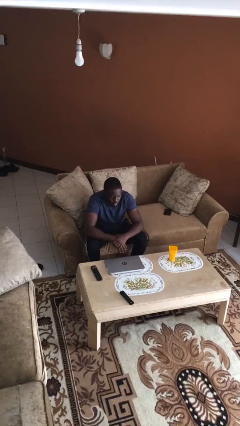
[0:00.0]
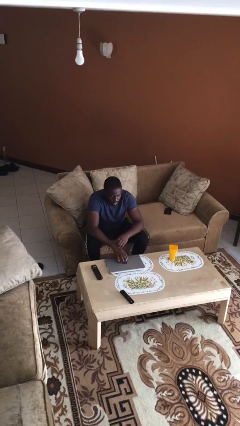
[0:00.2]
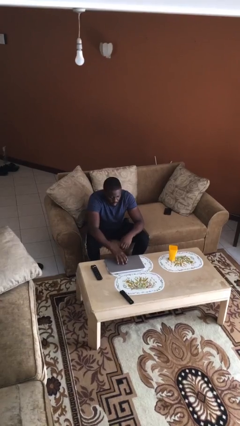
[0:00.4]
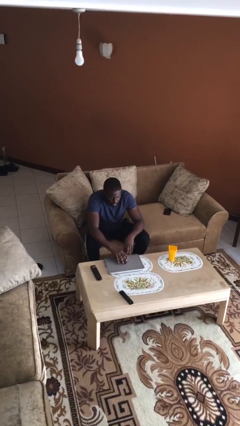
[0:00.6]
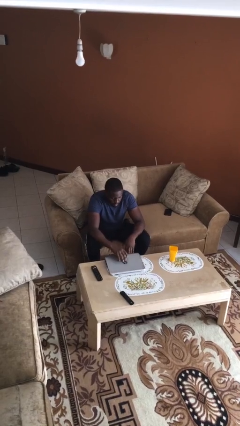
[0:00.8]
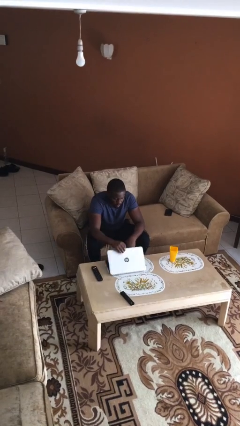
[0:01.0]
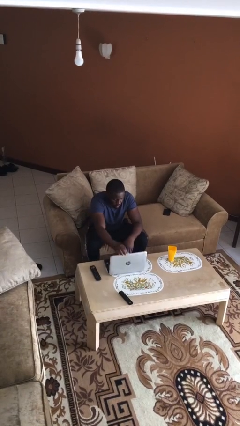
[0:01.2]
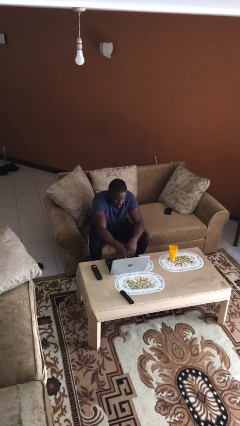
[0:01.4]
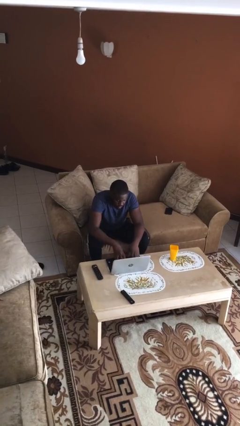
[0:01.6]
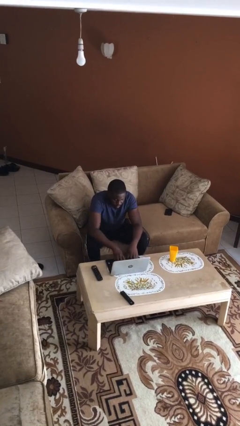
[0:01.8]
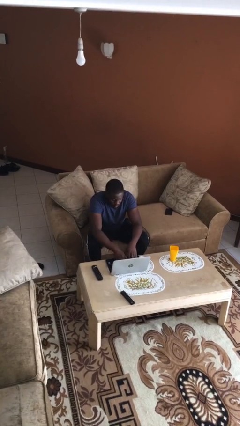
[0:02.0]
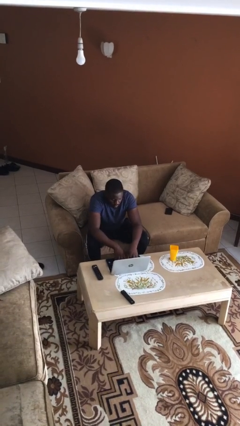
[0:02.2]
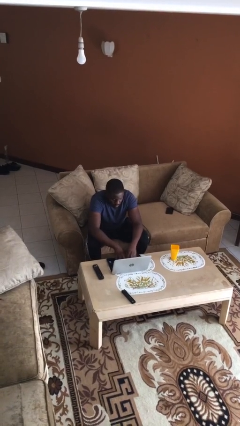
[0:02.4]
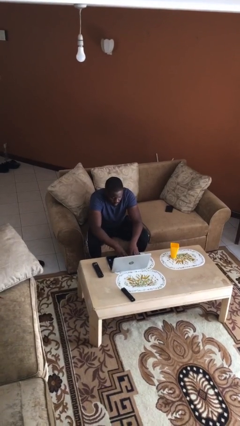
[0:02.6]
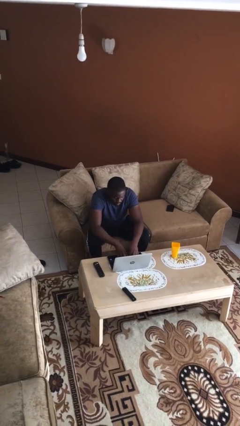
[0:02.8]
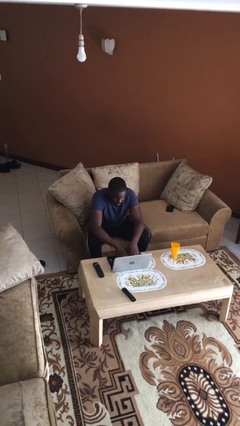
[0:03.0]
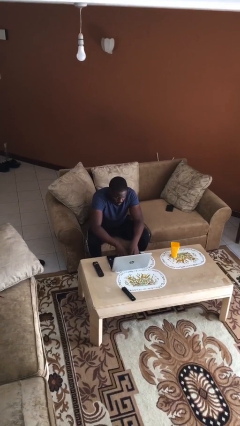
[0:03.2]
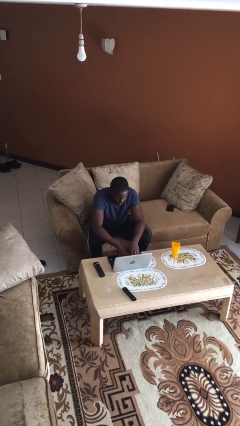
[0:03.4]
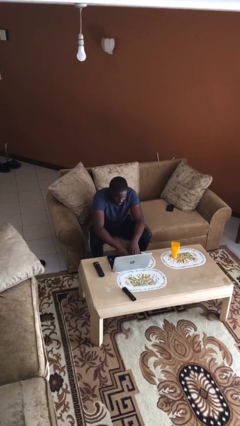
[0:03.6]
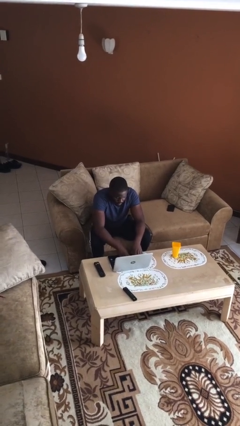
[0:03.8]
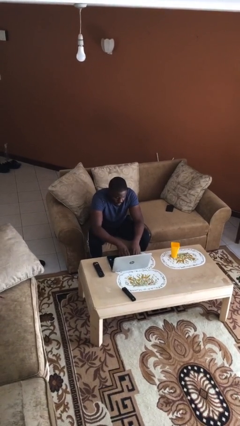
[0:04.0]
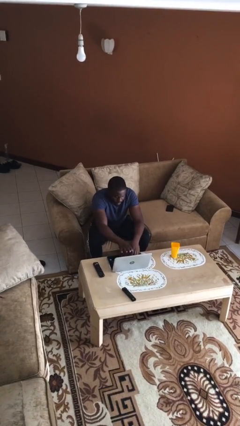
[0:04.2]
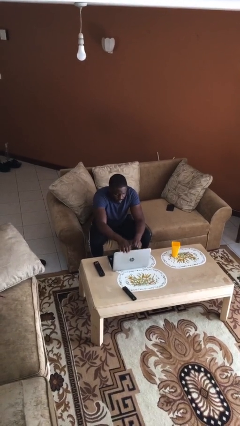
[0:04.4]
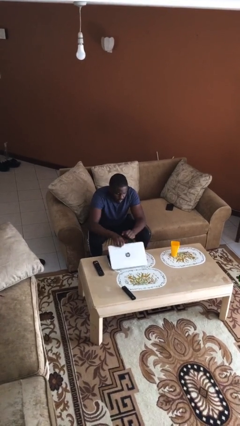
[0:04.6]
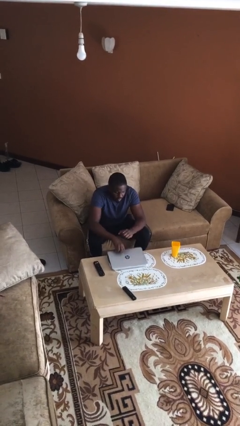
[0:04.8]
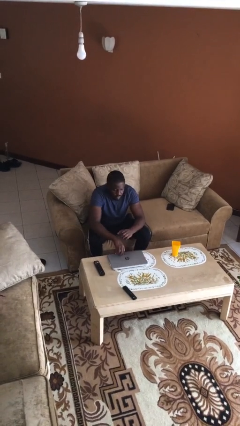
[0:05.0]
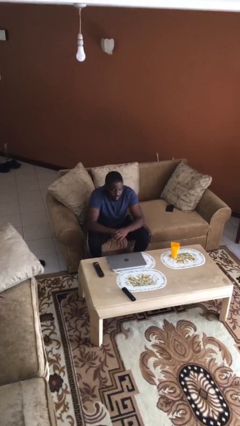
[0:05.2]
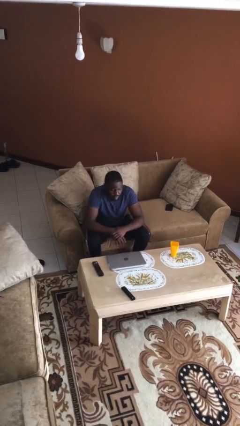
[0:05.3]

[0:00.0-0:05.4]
person interacts with laptop

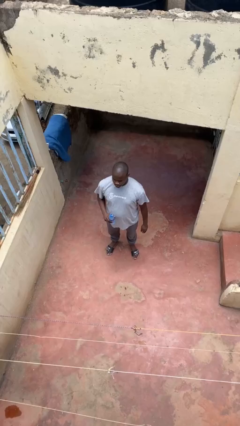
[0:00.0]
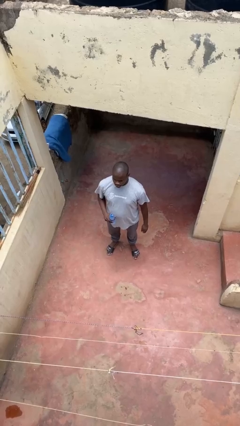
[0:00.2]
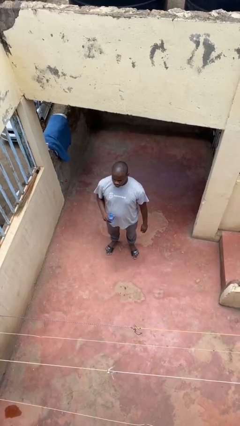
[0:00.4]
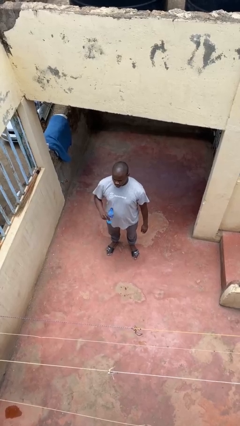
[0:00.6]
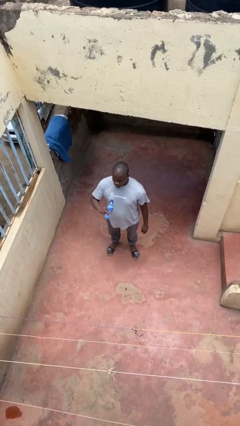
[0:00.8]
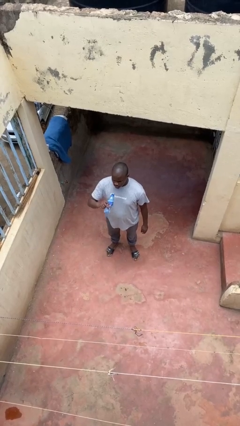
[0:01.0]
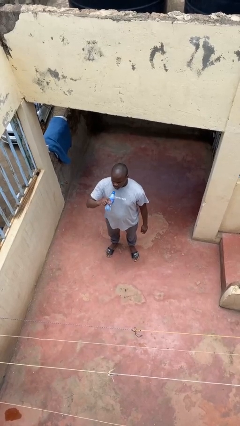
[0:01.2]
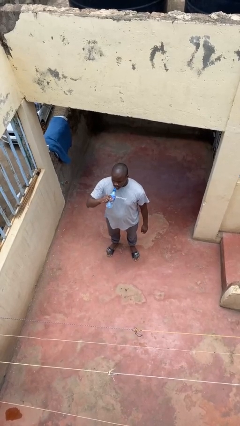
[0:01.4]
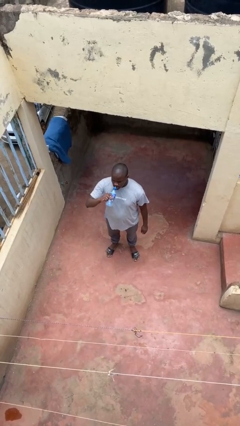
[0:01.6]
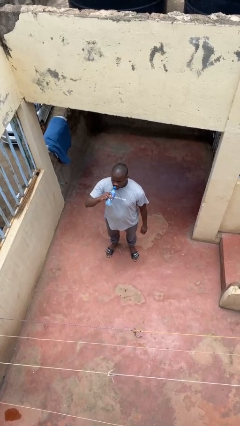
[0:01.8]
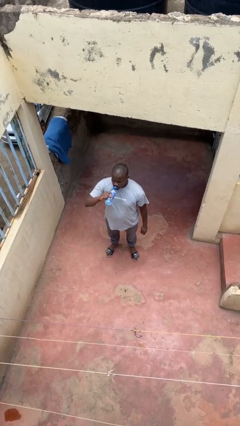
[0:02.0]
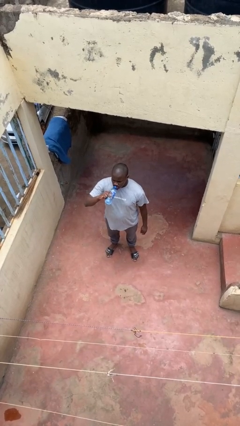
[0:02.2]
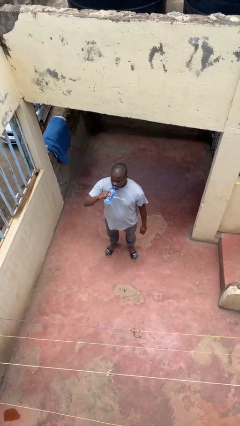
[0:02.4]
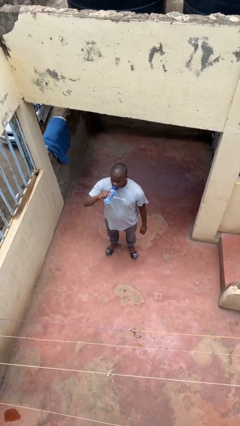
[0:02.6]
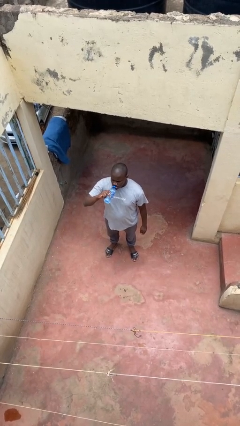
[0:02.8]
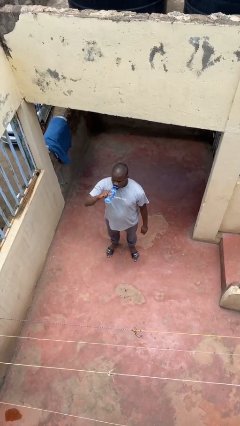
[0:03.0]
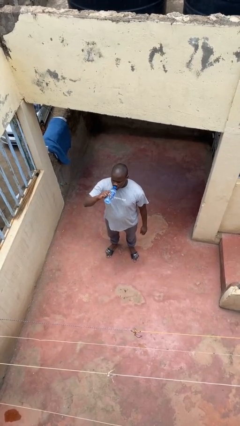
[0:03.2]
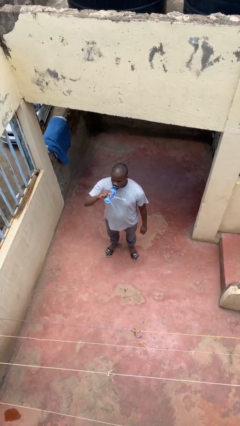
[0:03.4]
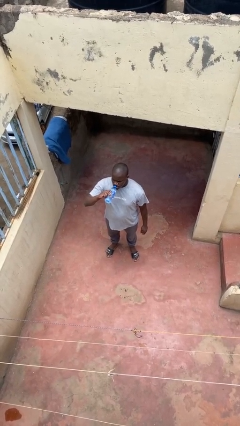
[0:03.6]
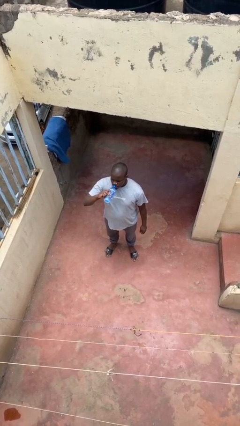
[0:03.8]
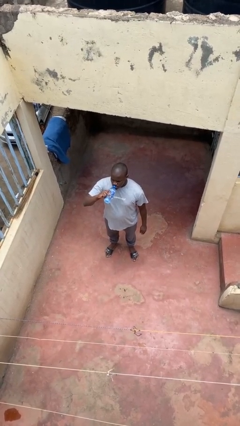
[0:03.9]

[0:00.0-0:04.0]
person drinks from bottle

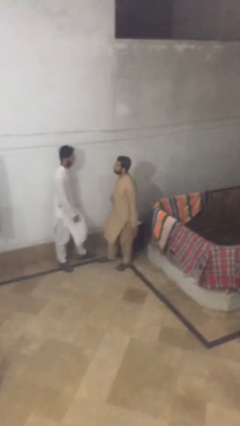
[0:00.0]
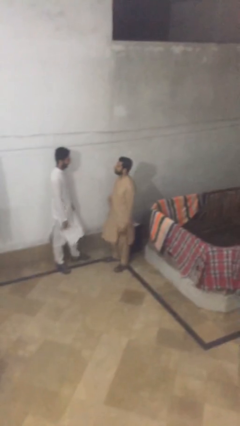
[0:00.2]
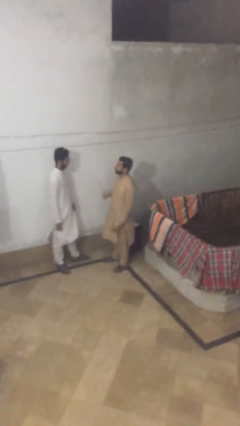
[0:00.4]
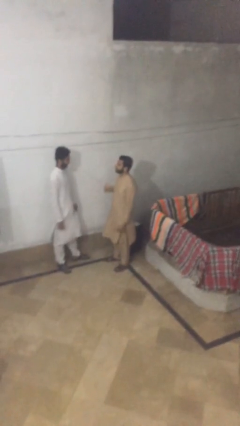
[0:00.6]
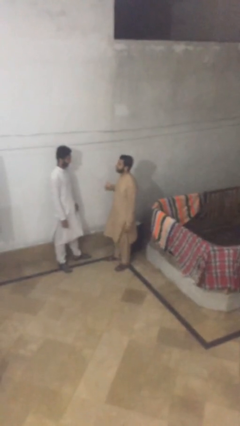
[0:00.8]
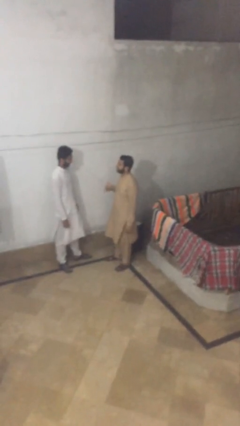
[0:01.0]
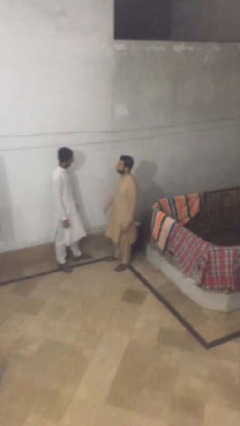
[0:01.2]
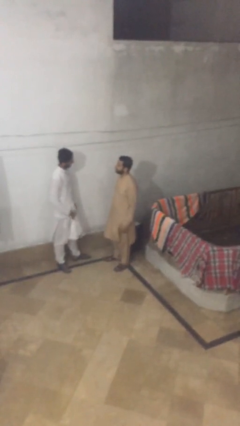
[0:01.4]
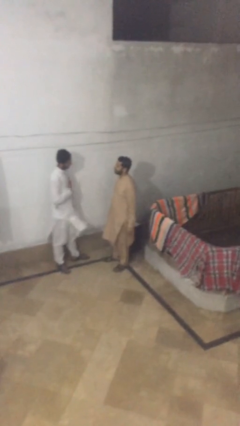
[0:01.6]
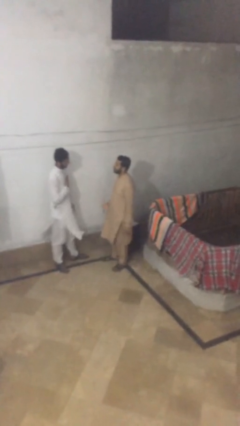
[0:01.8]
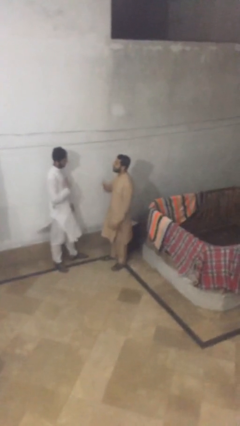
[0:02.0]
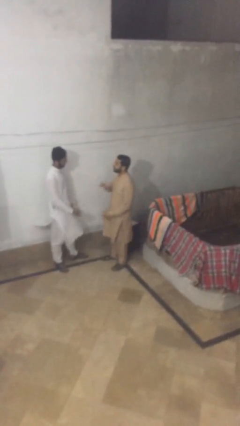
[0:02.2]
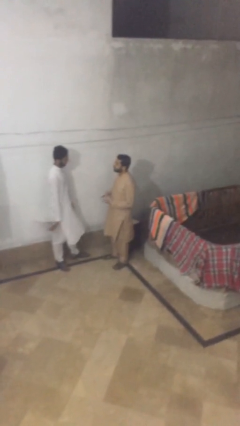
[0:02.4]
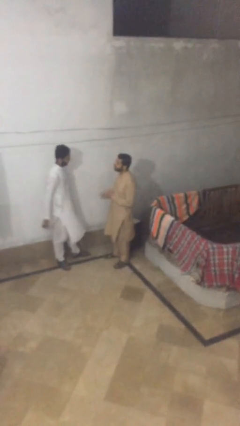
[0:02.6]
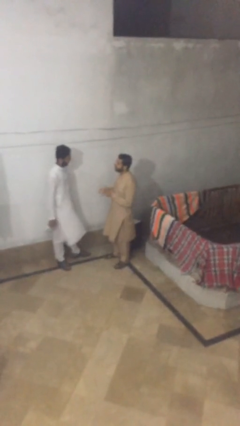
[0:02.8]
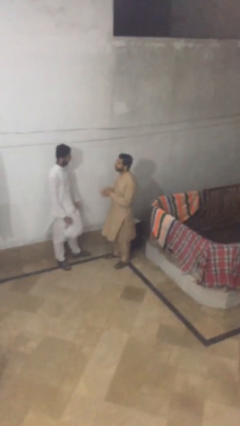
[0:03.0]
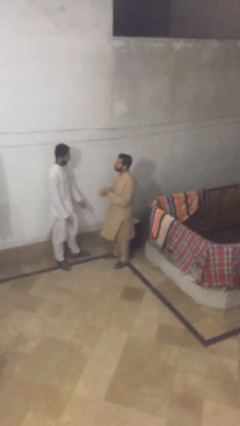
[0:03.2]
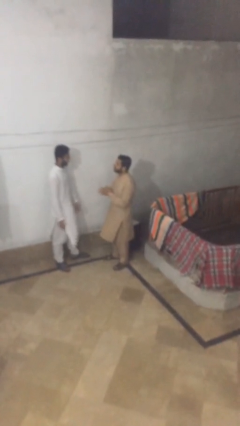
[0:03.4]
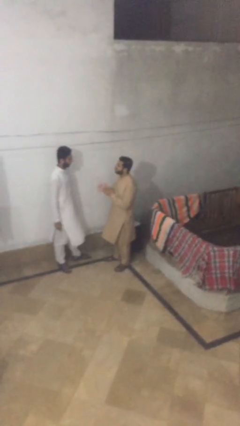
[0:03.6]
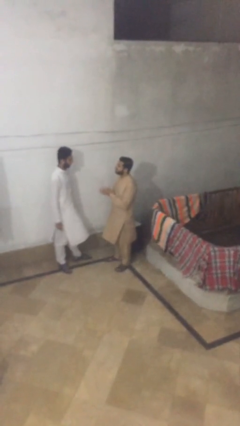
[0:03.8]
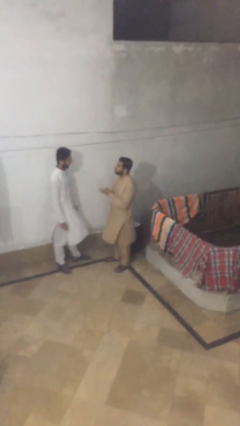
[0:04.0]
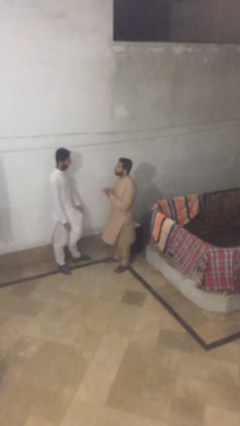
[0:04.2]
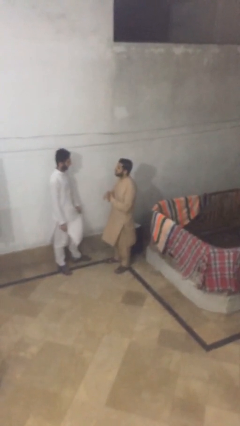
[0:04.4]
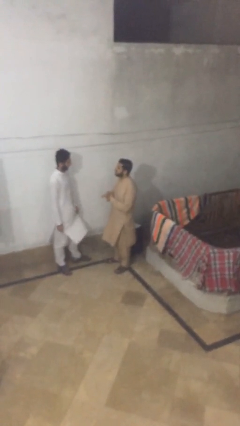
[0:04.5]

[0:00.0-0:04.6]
person talks to person

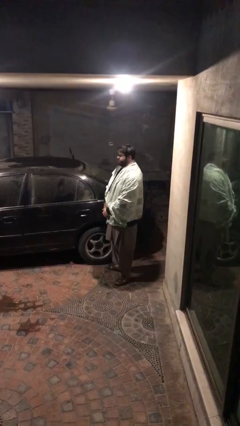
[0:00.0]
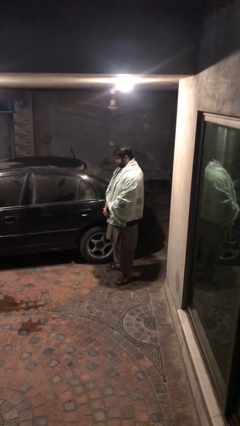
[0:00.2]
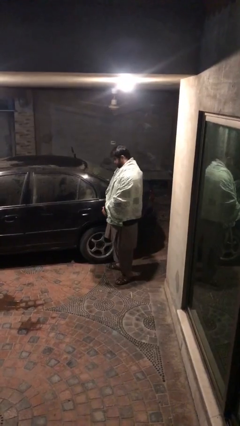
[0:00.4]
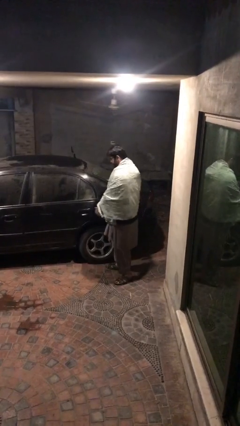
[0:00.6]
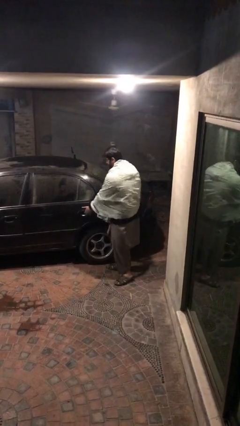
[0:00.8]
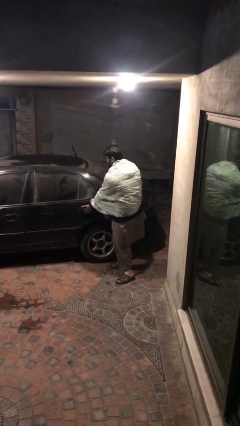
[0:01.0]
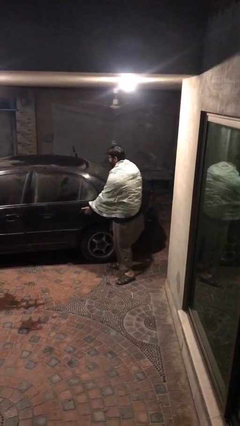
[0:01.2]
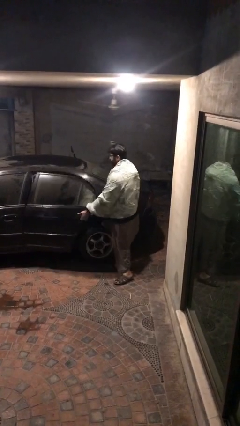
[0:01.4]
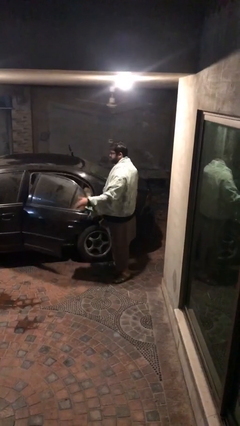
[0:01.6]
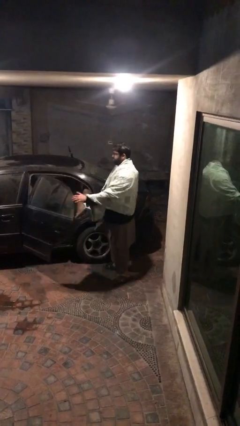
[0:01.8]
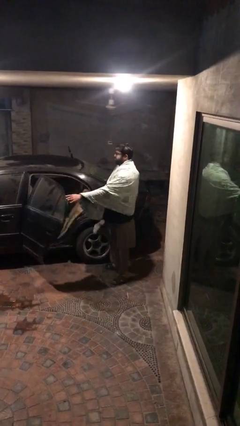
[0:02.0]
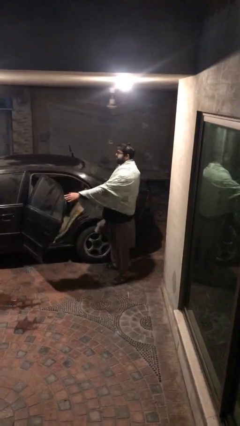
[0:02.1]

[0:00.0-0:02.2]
person opens car door

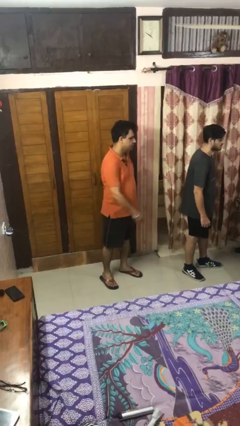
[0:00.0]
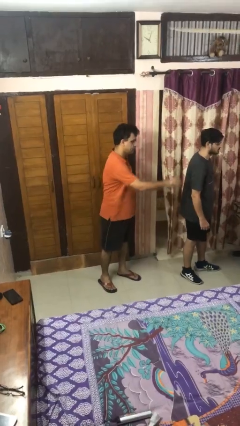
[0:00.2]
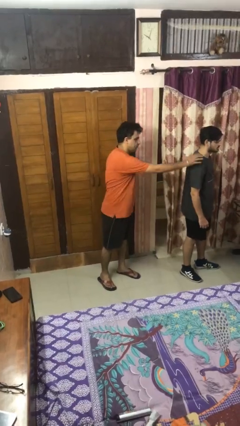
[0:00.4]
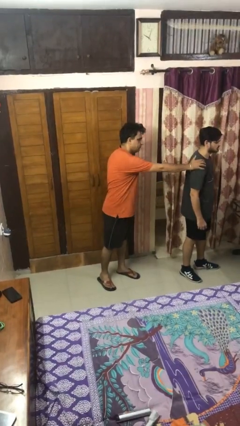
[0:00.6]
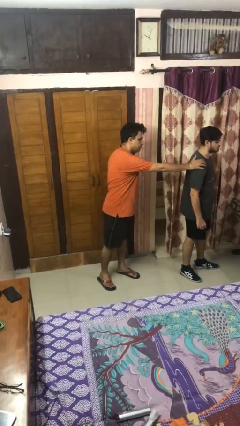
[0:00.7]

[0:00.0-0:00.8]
person grabs person by shoulder

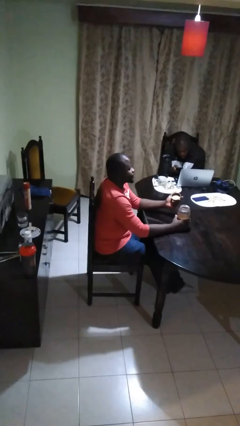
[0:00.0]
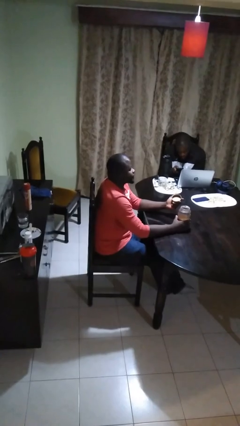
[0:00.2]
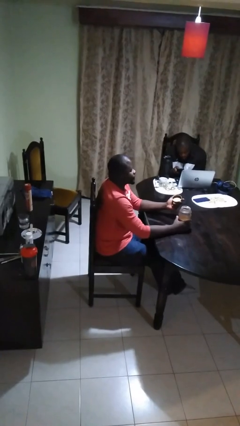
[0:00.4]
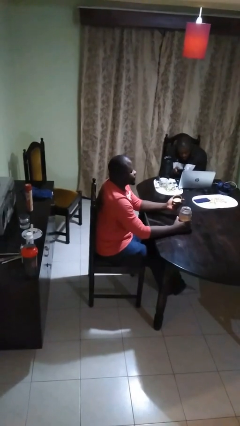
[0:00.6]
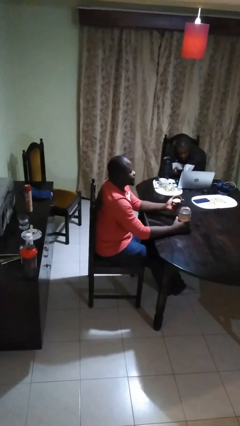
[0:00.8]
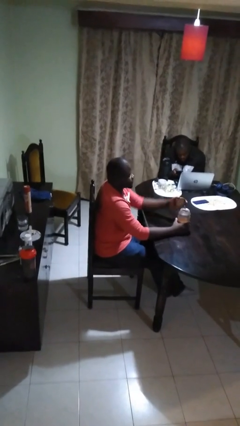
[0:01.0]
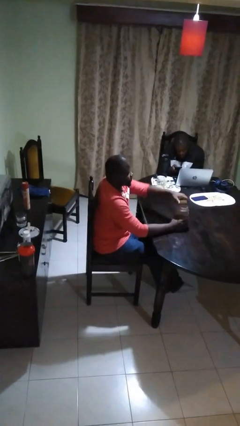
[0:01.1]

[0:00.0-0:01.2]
person opens jar
